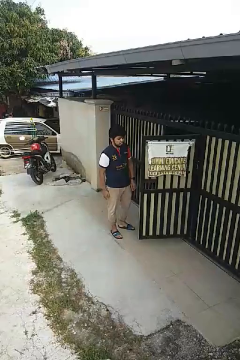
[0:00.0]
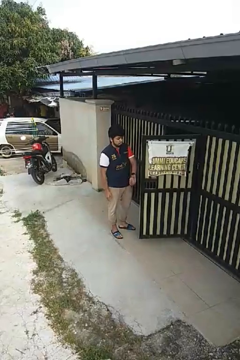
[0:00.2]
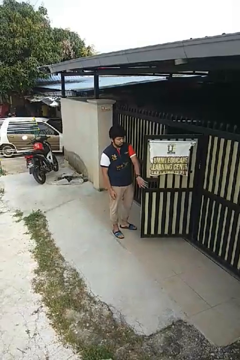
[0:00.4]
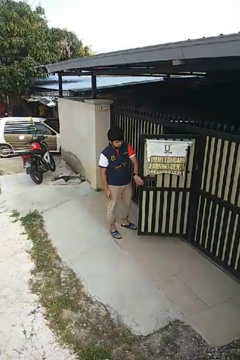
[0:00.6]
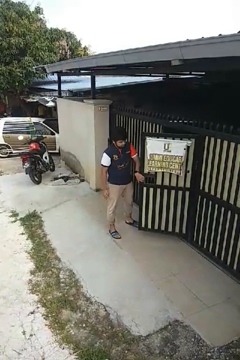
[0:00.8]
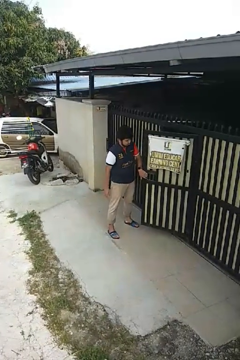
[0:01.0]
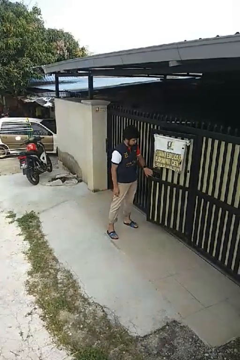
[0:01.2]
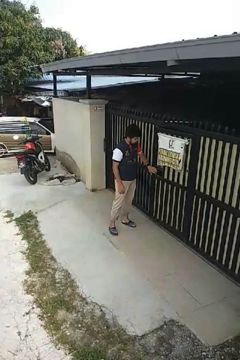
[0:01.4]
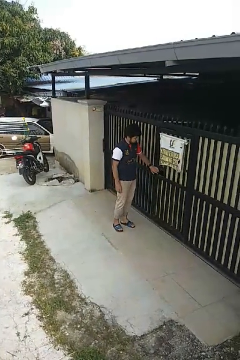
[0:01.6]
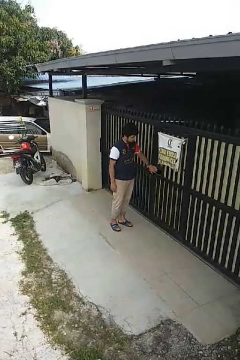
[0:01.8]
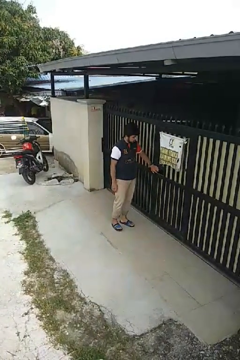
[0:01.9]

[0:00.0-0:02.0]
person closes gate

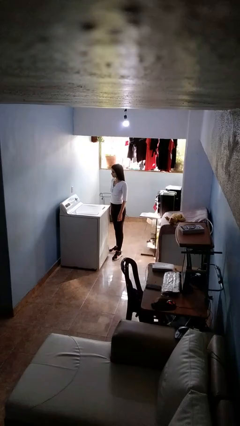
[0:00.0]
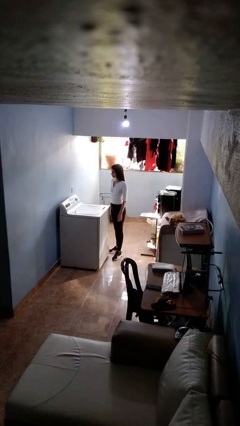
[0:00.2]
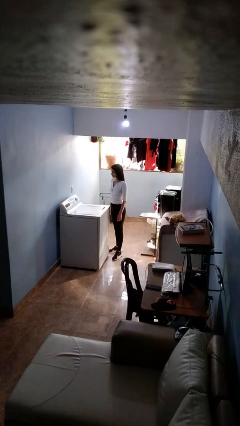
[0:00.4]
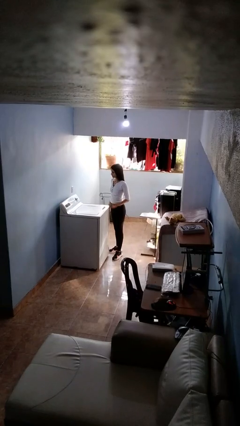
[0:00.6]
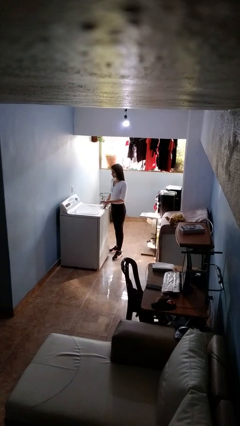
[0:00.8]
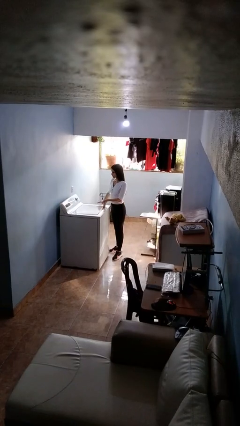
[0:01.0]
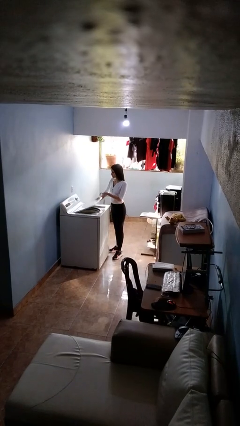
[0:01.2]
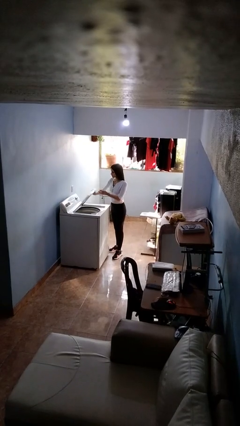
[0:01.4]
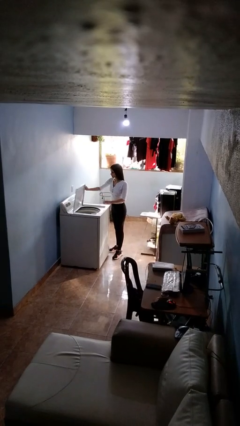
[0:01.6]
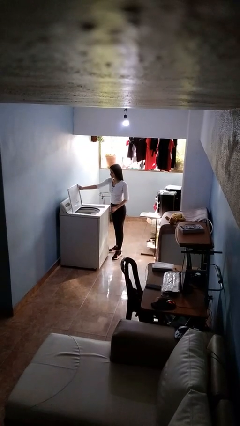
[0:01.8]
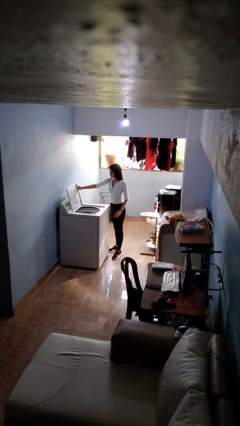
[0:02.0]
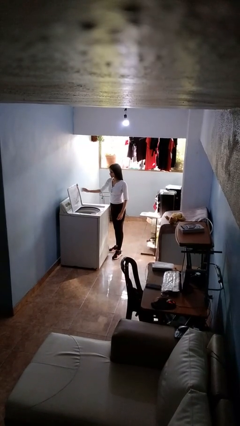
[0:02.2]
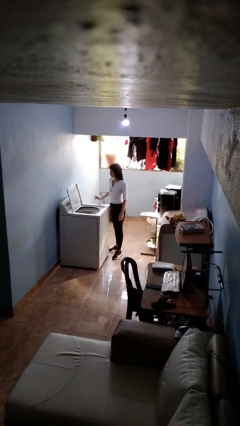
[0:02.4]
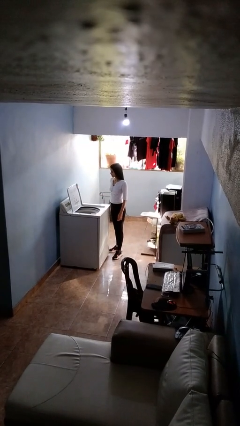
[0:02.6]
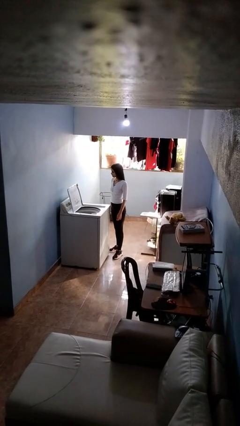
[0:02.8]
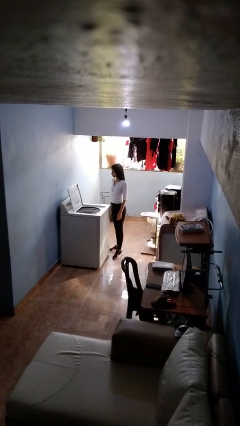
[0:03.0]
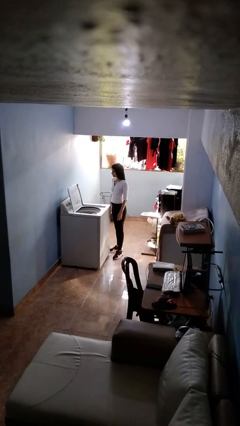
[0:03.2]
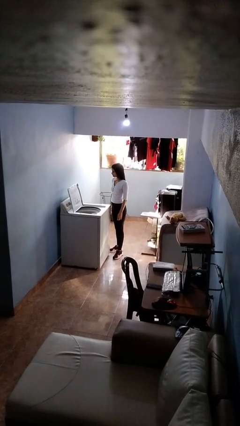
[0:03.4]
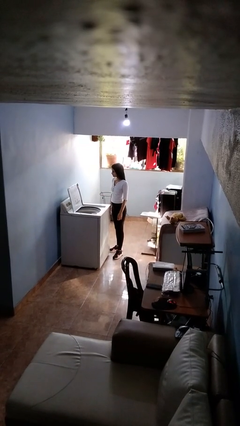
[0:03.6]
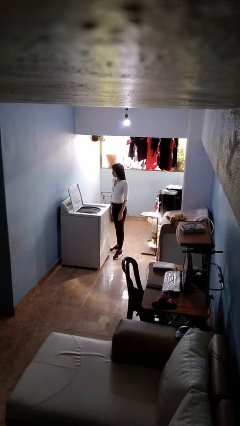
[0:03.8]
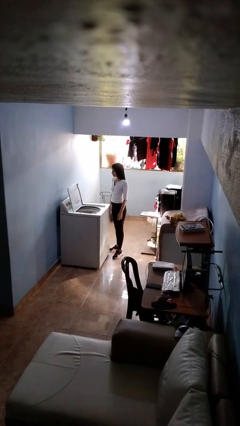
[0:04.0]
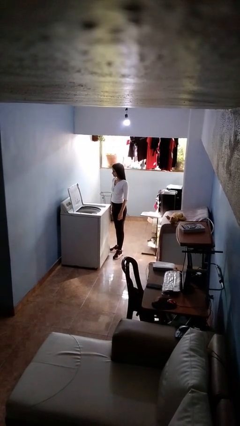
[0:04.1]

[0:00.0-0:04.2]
person opens clothes washer

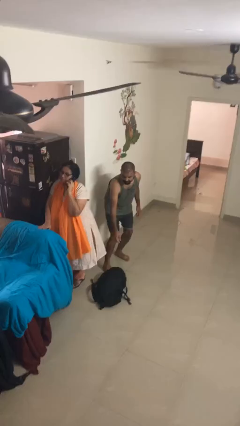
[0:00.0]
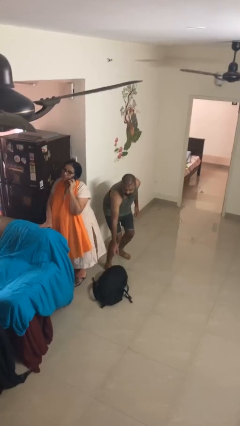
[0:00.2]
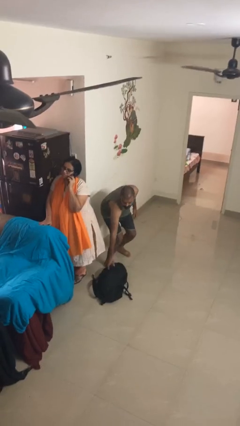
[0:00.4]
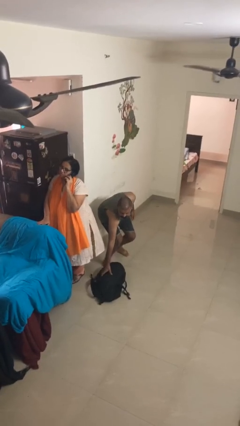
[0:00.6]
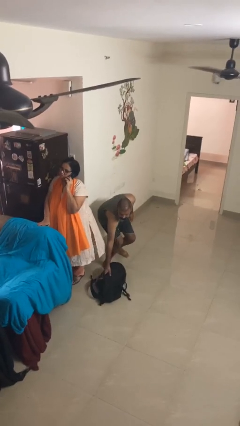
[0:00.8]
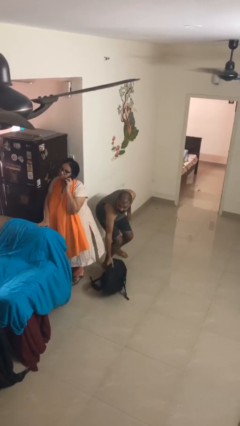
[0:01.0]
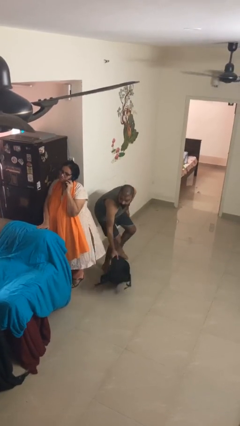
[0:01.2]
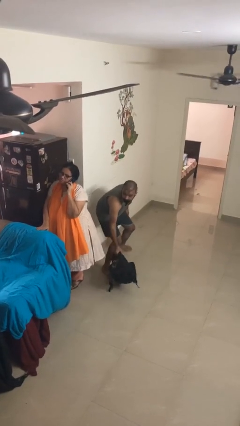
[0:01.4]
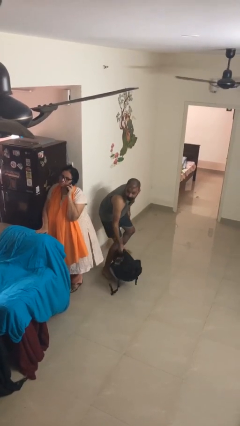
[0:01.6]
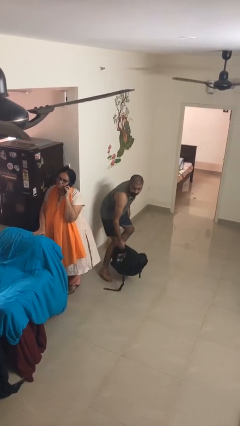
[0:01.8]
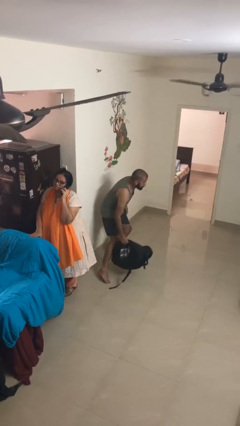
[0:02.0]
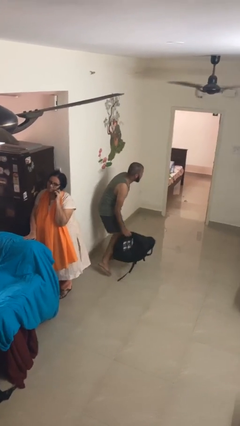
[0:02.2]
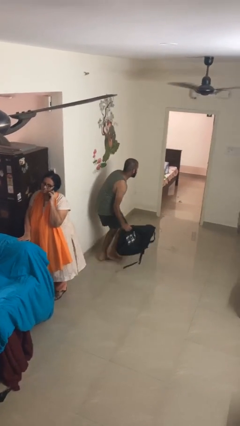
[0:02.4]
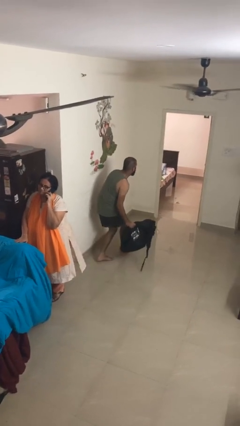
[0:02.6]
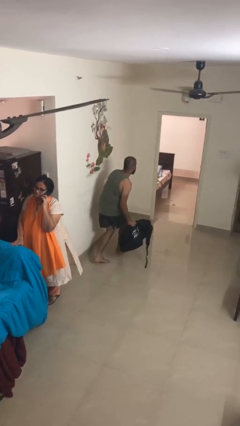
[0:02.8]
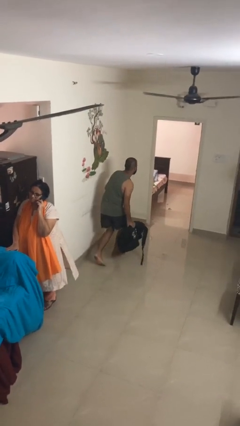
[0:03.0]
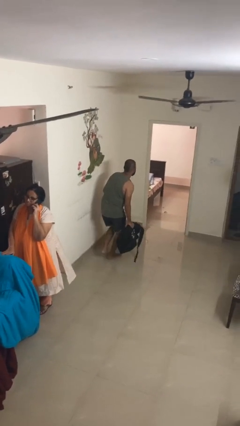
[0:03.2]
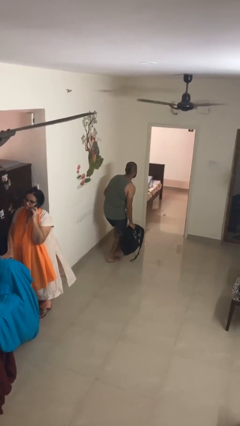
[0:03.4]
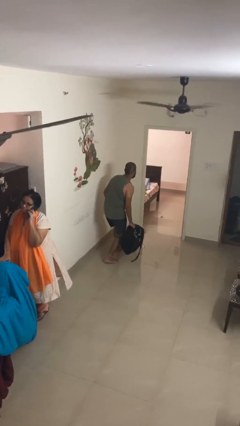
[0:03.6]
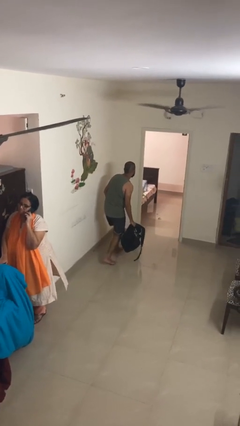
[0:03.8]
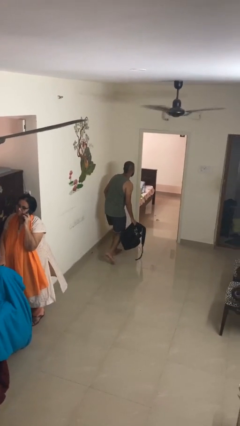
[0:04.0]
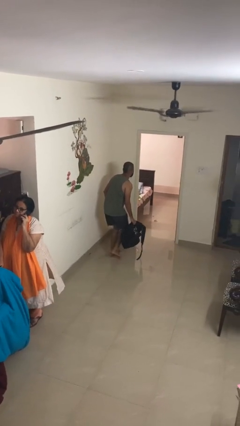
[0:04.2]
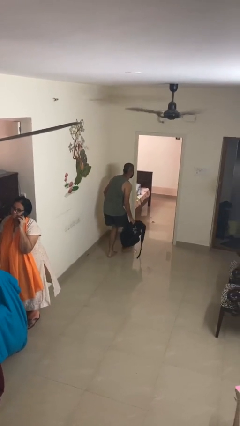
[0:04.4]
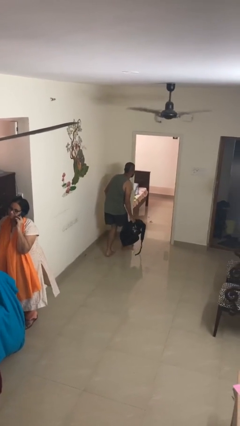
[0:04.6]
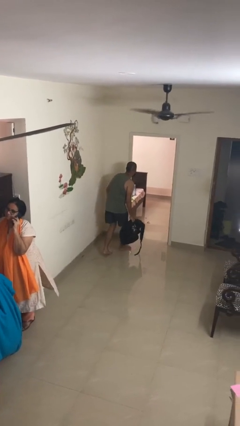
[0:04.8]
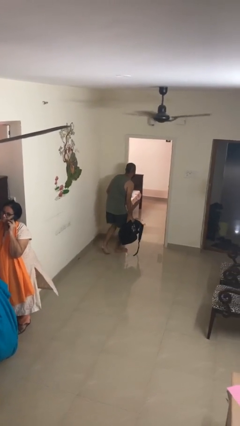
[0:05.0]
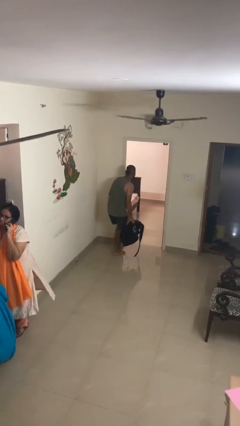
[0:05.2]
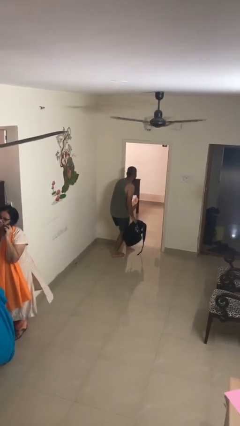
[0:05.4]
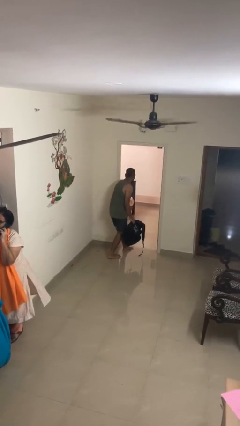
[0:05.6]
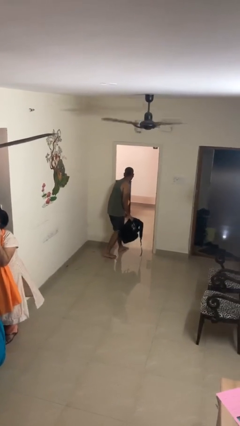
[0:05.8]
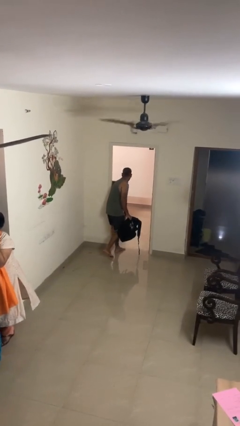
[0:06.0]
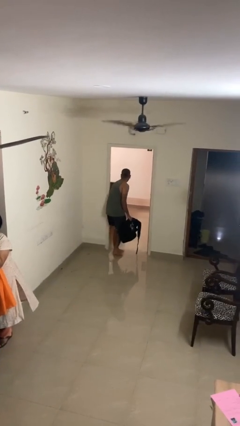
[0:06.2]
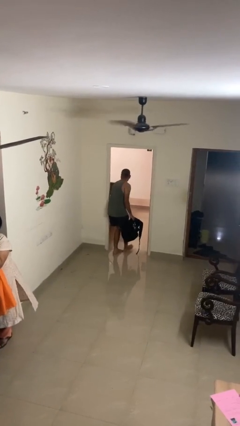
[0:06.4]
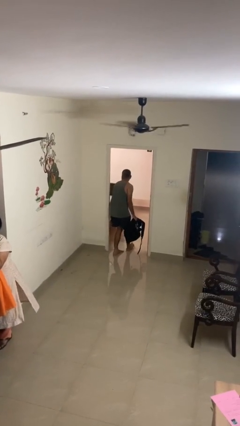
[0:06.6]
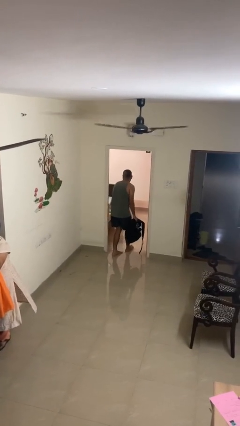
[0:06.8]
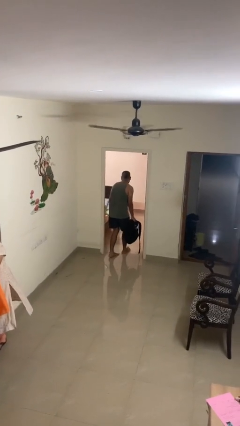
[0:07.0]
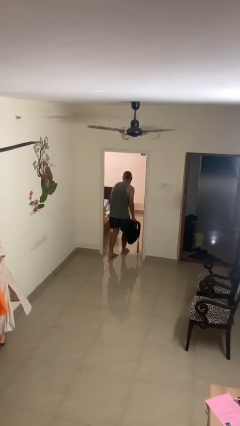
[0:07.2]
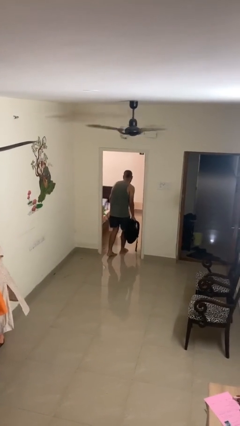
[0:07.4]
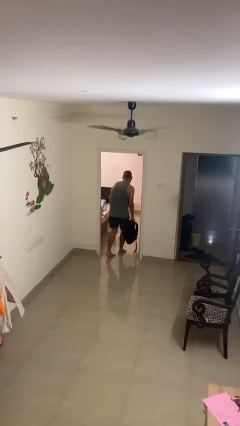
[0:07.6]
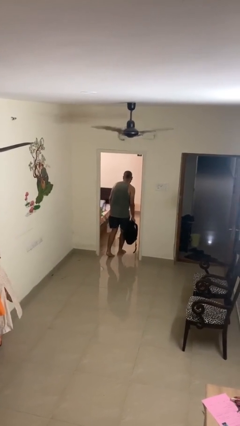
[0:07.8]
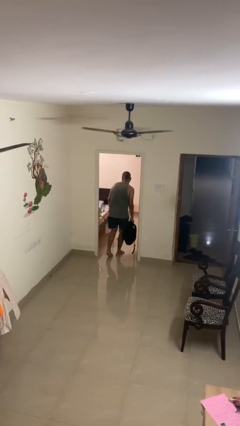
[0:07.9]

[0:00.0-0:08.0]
person steals object from person

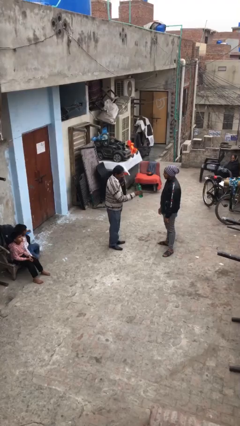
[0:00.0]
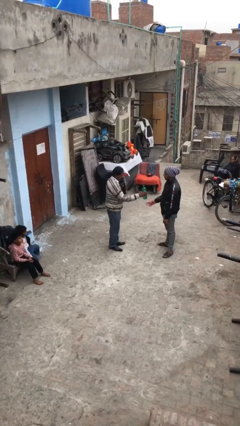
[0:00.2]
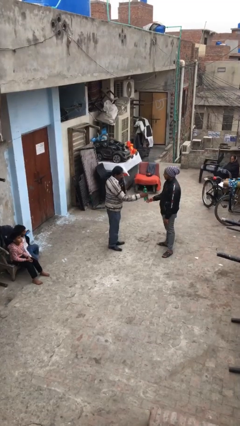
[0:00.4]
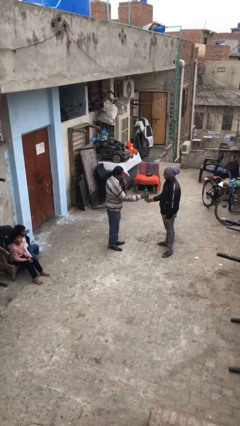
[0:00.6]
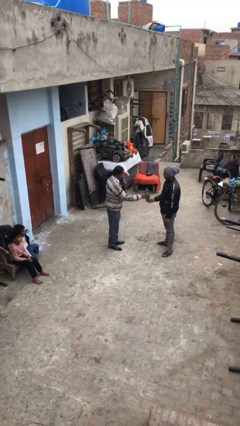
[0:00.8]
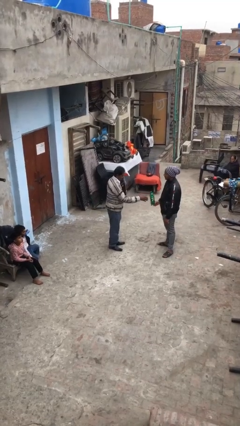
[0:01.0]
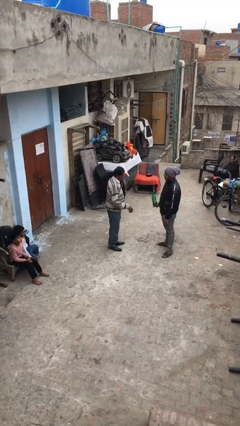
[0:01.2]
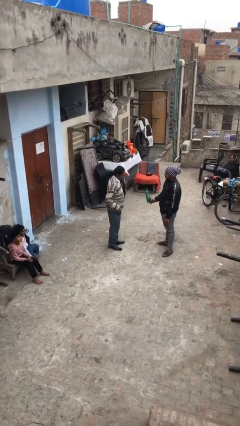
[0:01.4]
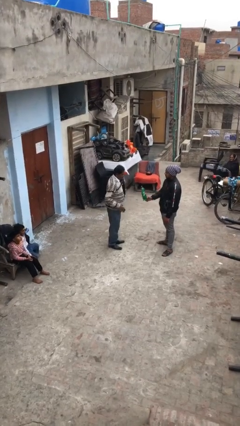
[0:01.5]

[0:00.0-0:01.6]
person transfers object to person

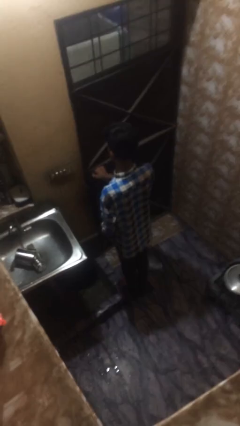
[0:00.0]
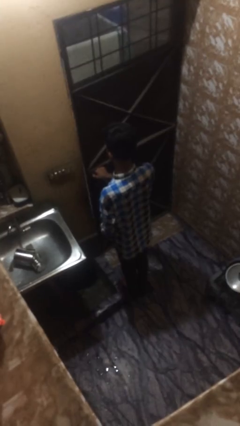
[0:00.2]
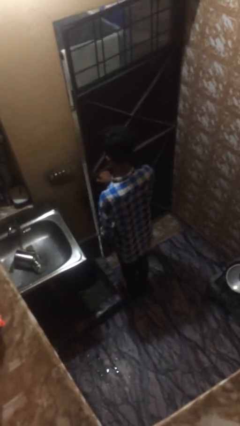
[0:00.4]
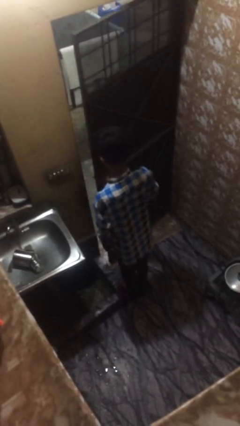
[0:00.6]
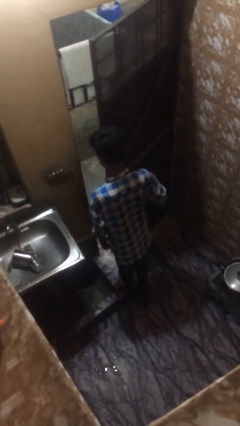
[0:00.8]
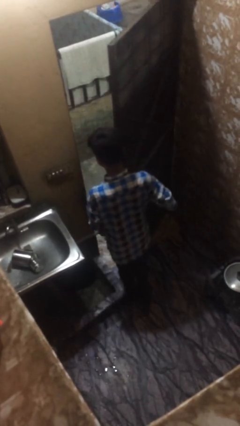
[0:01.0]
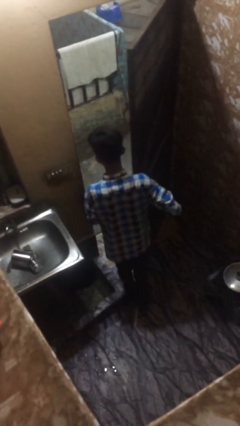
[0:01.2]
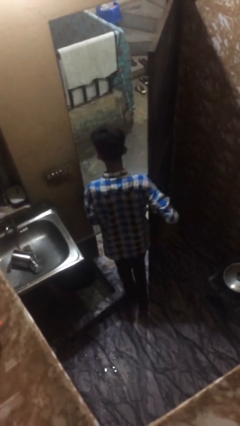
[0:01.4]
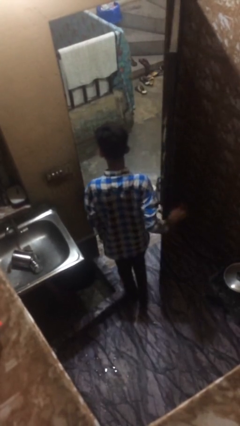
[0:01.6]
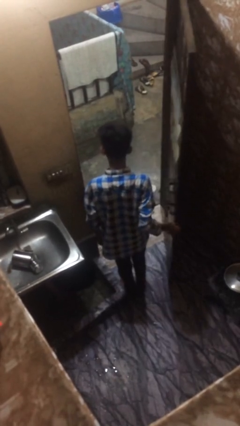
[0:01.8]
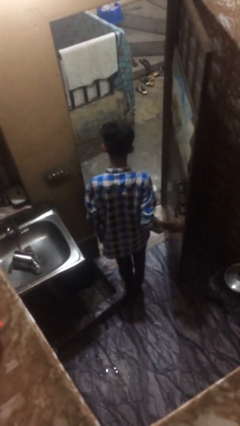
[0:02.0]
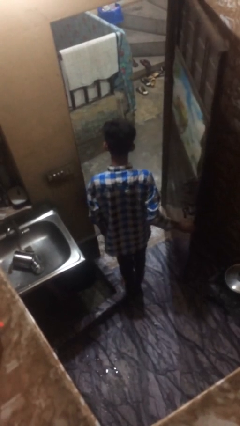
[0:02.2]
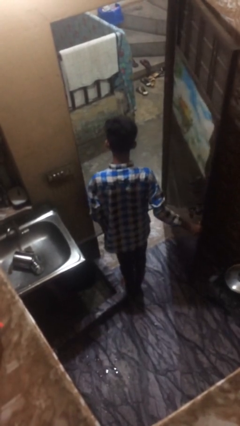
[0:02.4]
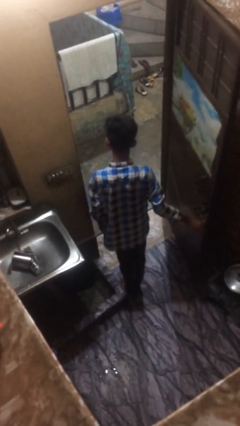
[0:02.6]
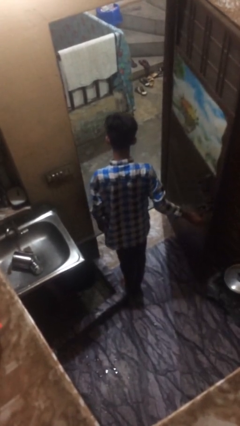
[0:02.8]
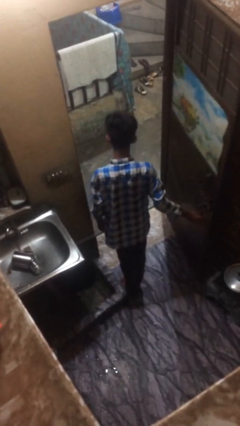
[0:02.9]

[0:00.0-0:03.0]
person opens facility door
